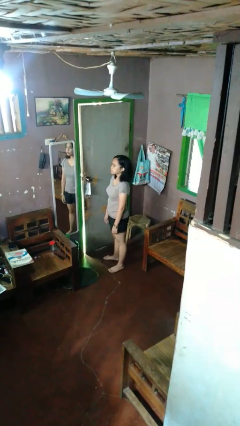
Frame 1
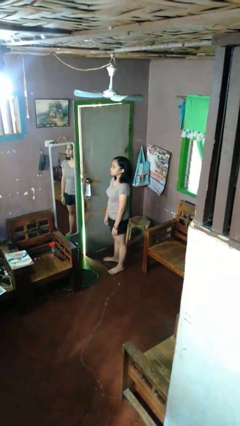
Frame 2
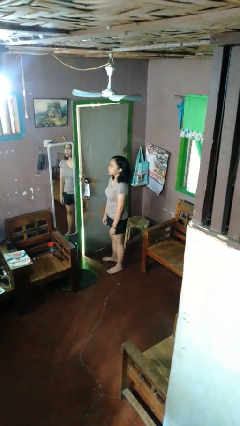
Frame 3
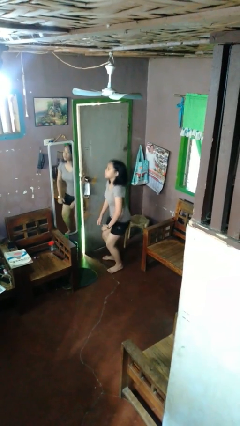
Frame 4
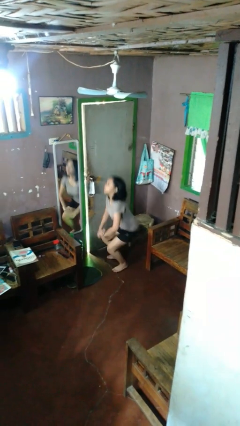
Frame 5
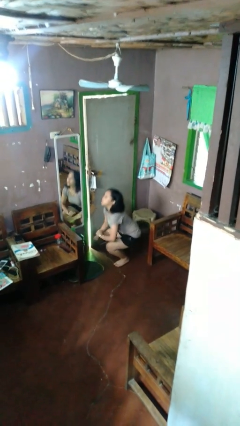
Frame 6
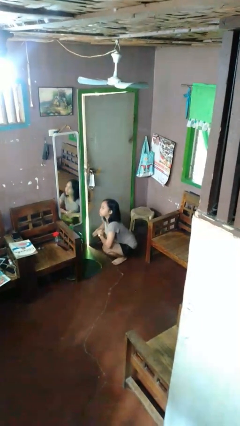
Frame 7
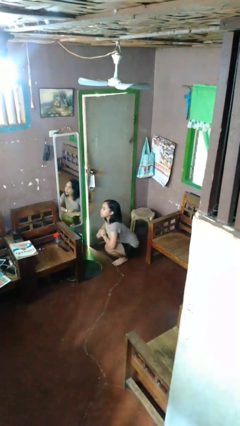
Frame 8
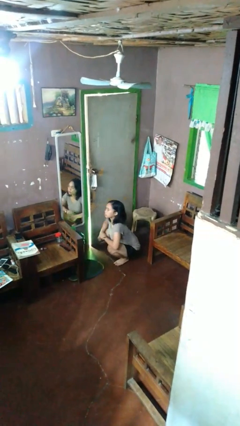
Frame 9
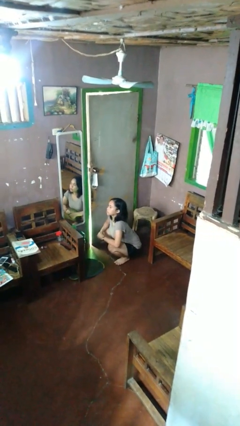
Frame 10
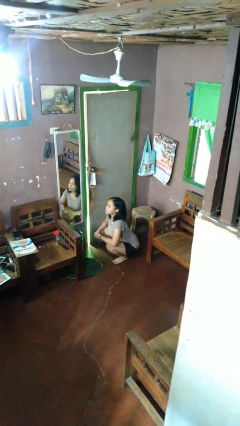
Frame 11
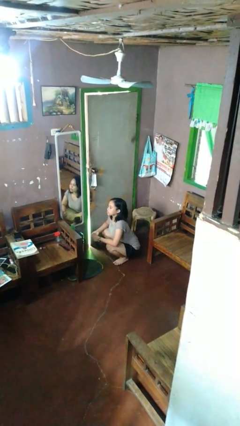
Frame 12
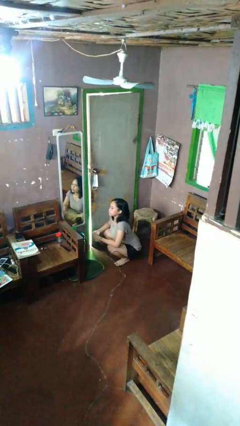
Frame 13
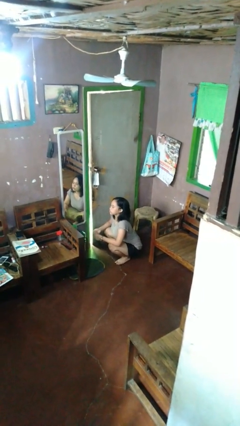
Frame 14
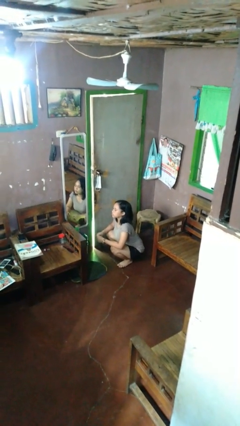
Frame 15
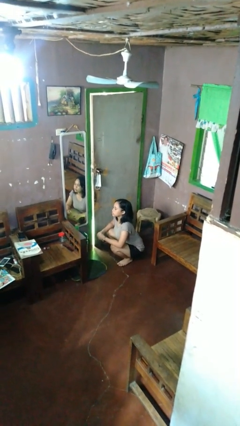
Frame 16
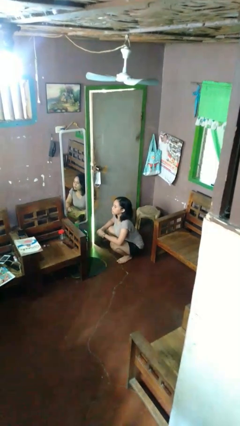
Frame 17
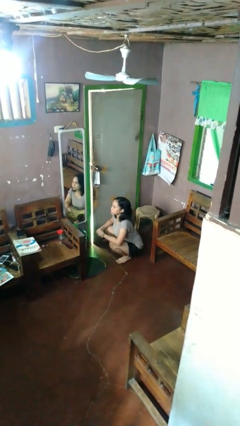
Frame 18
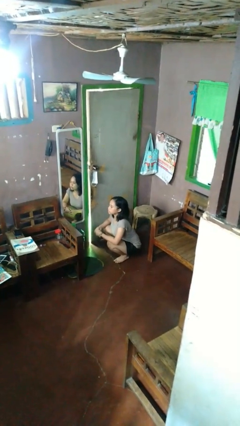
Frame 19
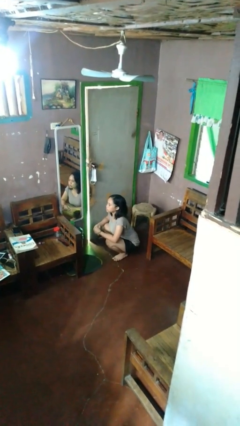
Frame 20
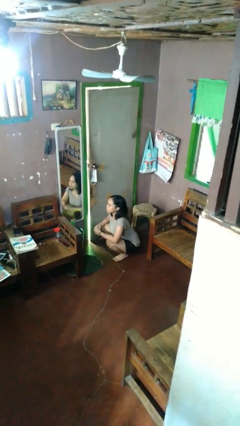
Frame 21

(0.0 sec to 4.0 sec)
person squats

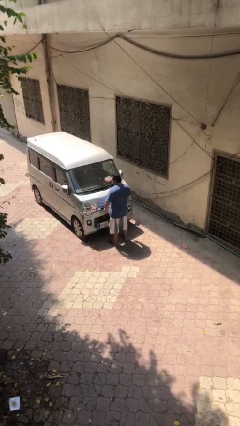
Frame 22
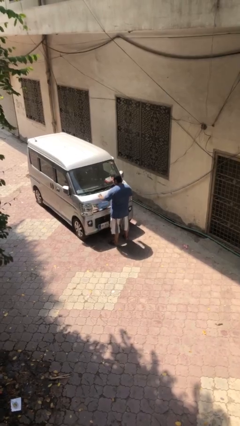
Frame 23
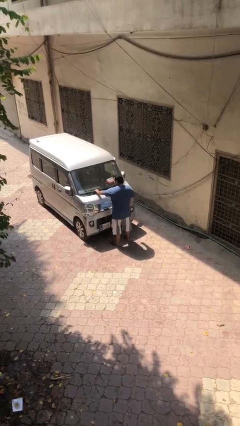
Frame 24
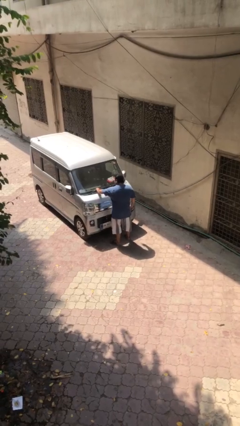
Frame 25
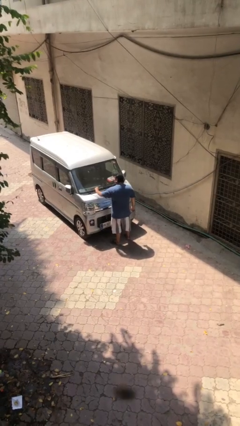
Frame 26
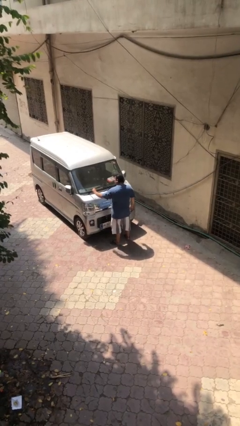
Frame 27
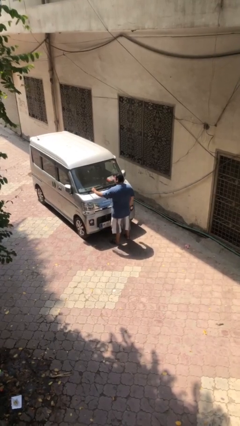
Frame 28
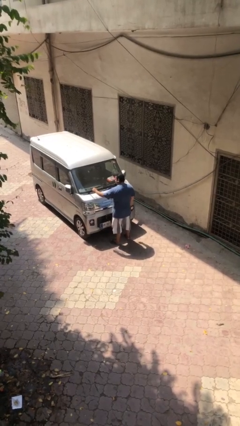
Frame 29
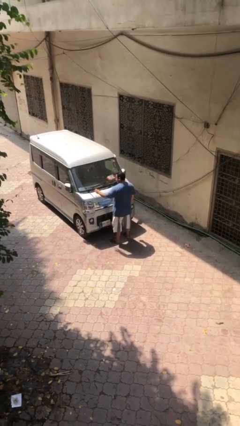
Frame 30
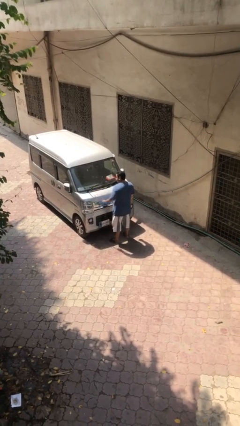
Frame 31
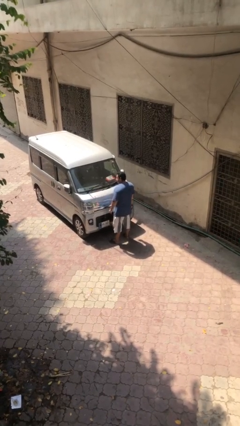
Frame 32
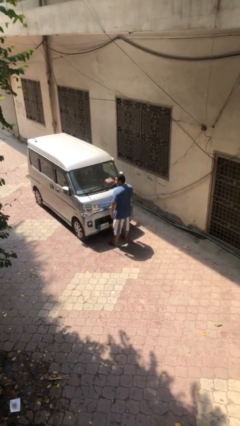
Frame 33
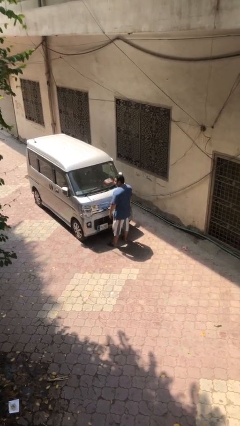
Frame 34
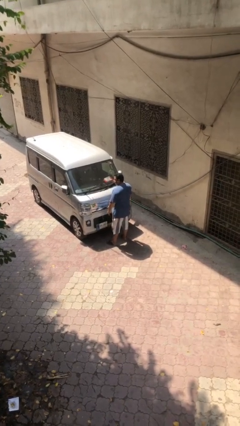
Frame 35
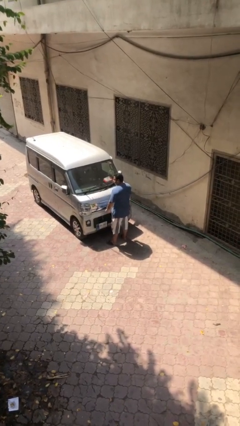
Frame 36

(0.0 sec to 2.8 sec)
person flips up car wipers

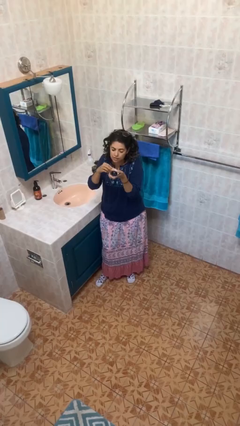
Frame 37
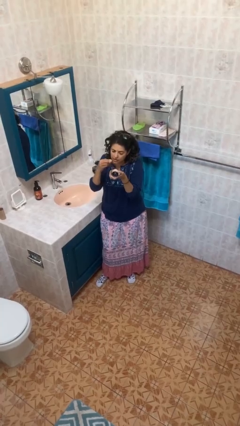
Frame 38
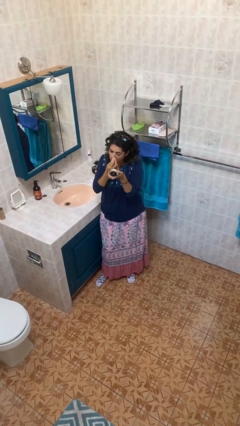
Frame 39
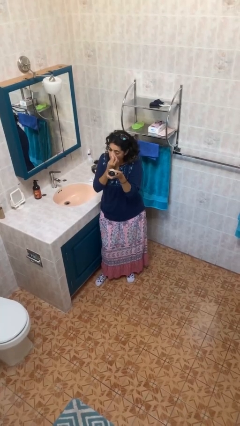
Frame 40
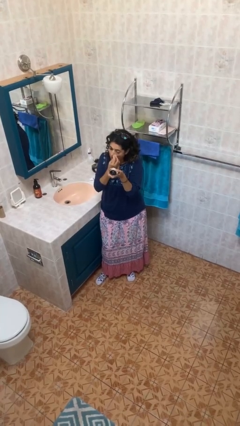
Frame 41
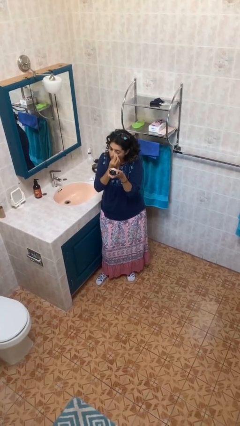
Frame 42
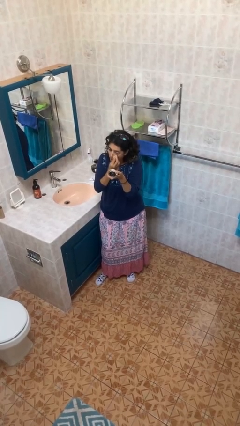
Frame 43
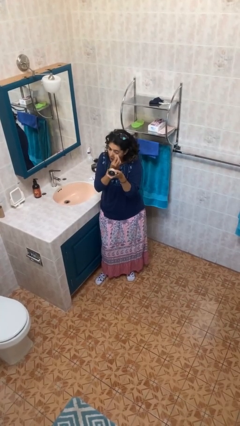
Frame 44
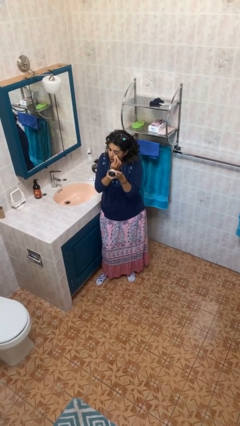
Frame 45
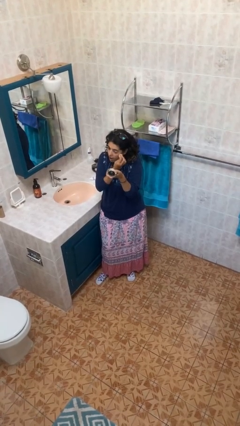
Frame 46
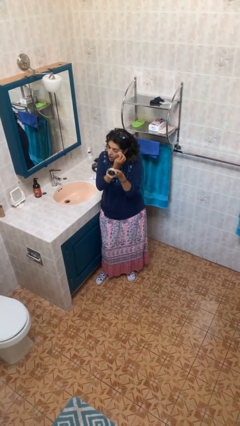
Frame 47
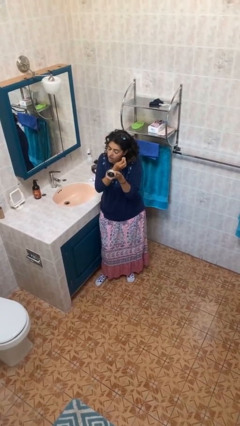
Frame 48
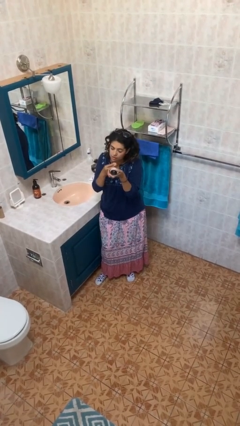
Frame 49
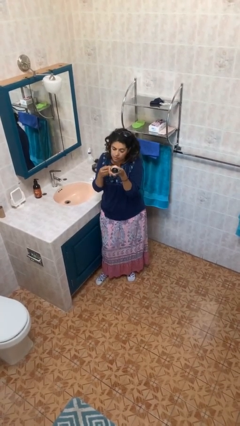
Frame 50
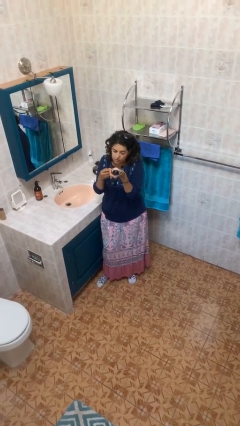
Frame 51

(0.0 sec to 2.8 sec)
person applies foundation makeup

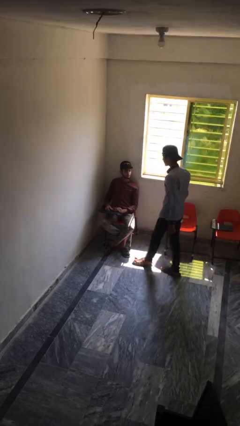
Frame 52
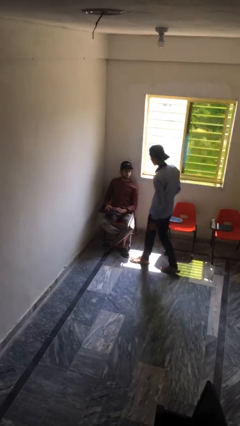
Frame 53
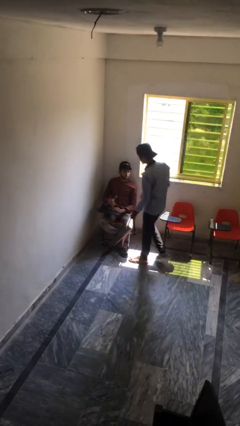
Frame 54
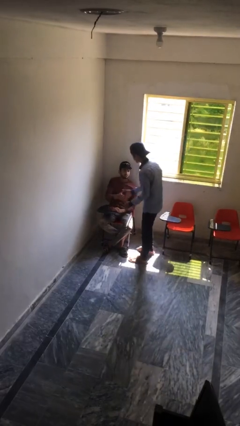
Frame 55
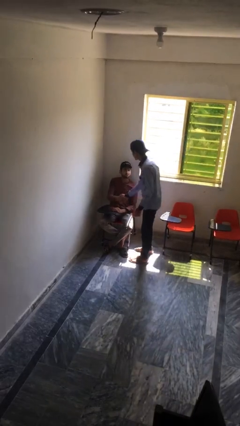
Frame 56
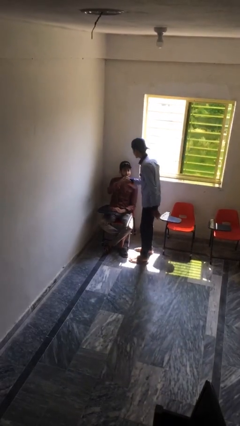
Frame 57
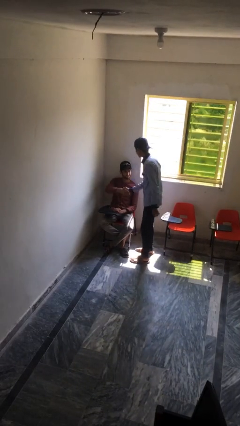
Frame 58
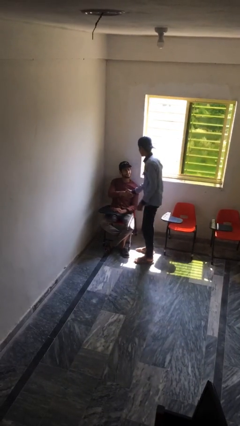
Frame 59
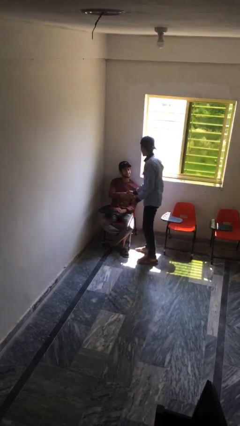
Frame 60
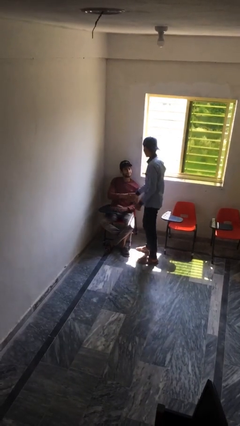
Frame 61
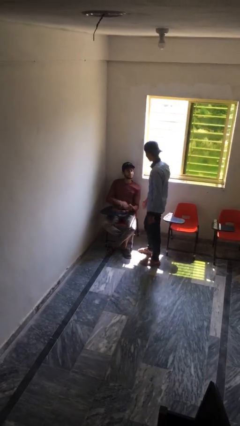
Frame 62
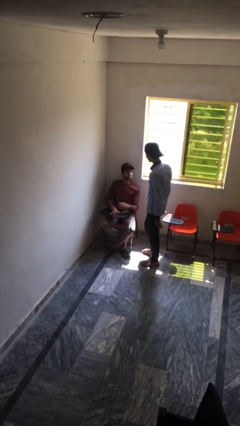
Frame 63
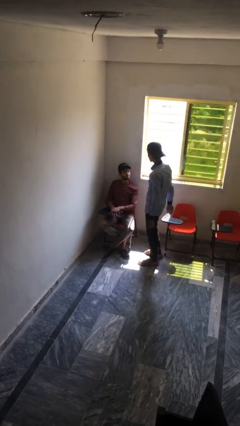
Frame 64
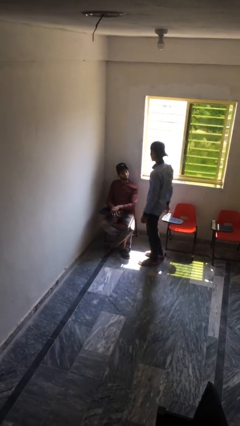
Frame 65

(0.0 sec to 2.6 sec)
person shakes hand

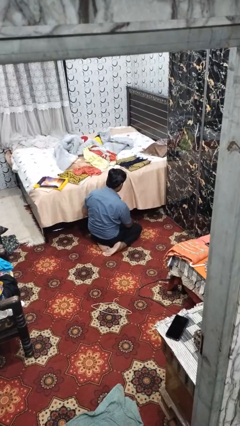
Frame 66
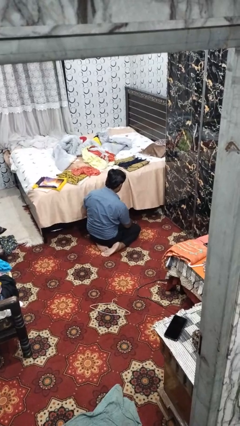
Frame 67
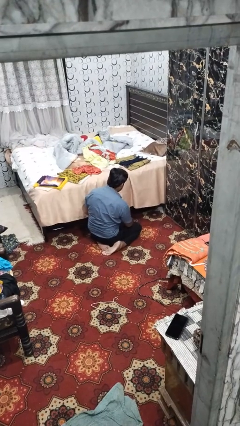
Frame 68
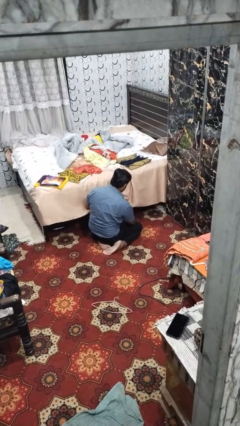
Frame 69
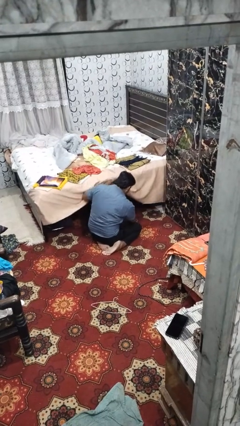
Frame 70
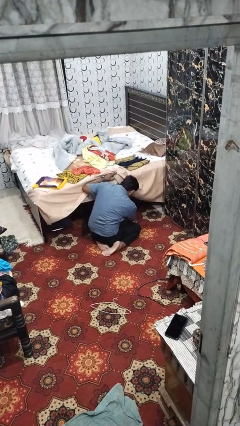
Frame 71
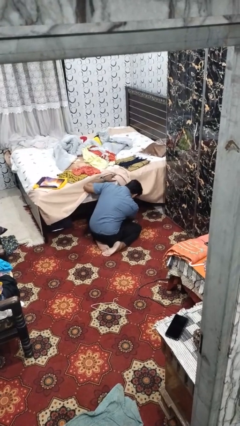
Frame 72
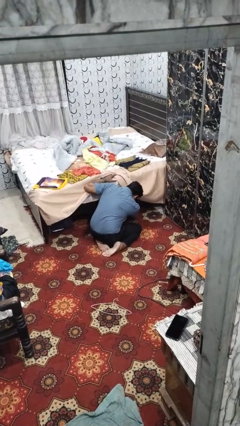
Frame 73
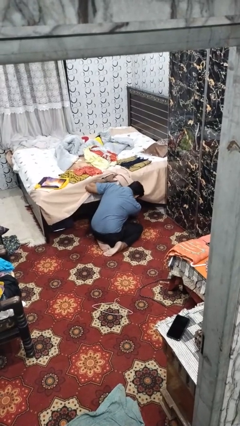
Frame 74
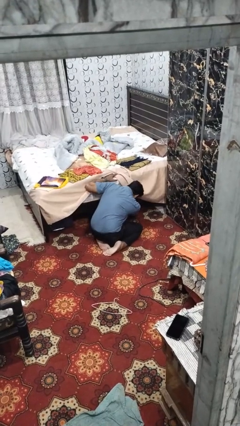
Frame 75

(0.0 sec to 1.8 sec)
person searches under bed

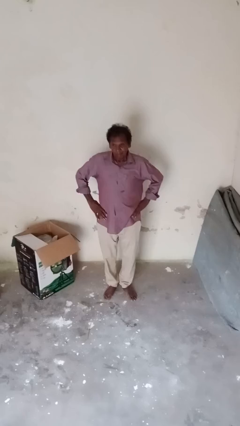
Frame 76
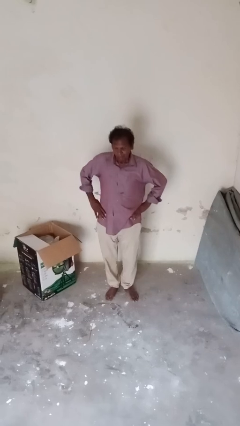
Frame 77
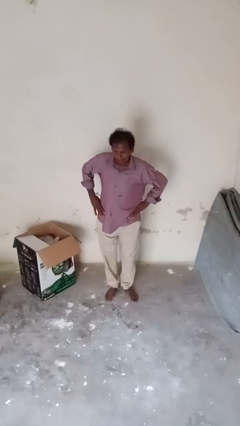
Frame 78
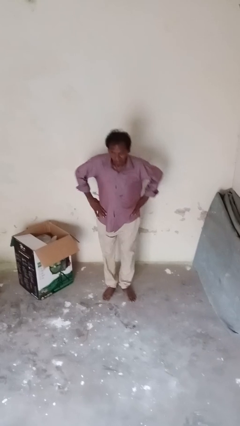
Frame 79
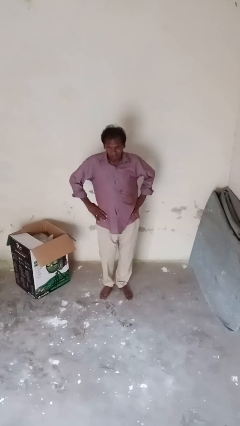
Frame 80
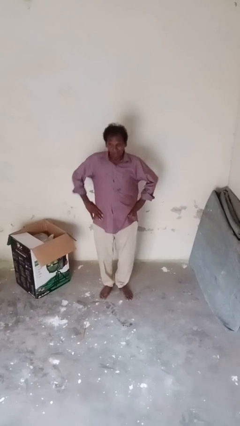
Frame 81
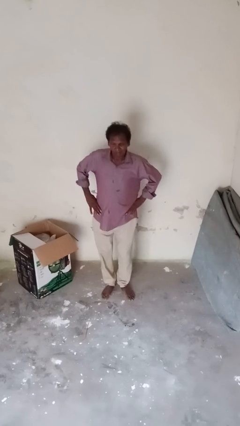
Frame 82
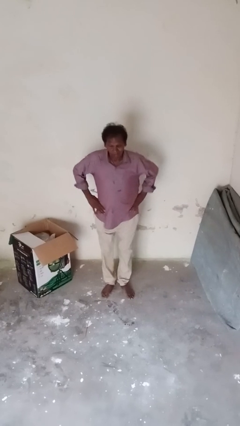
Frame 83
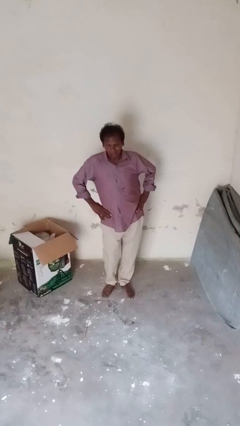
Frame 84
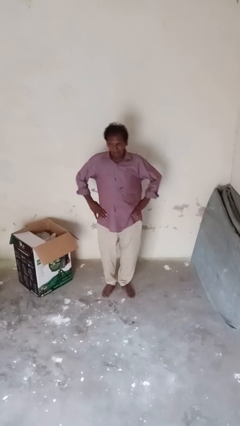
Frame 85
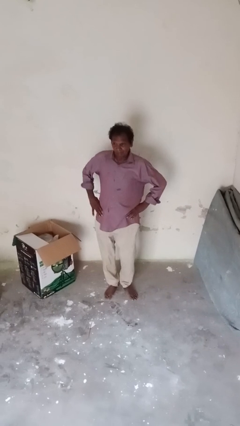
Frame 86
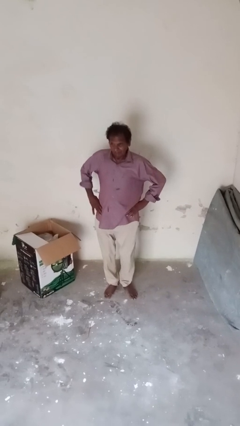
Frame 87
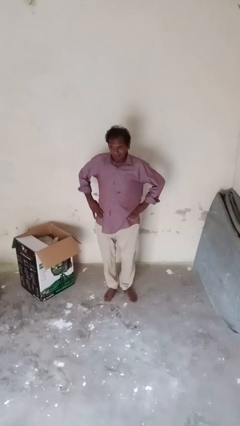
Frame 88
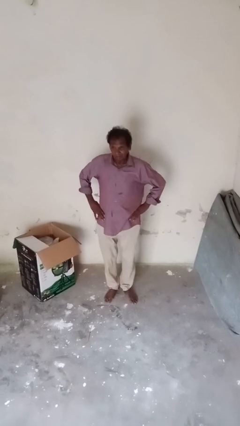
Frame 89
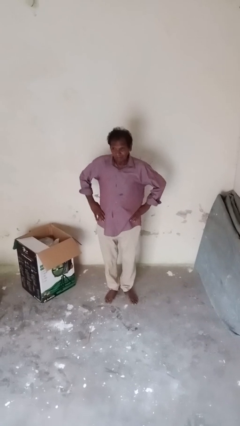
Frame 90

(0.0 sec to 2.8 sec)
person wiggles hips
